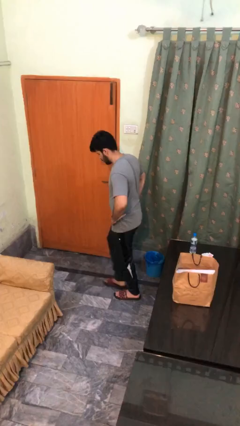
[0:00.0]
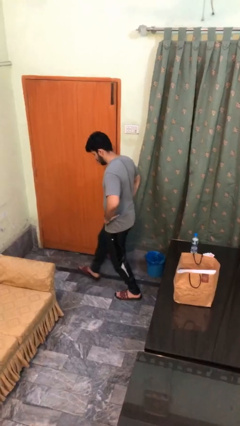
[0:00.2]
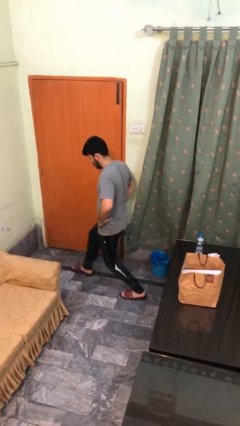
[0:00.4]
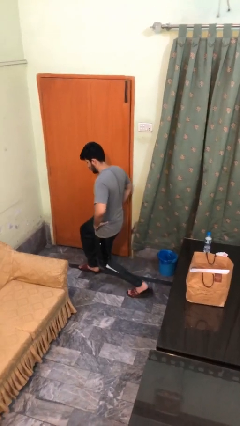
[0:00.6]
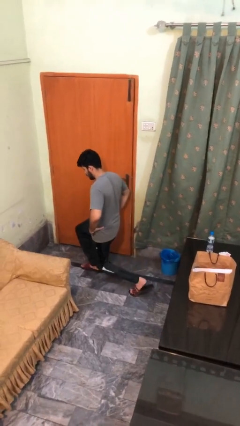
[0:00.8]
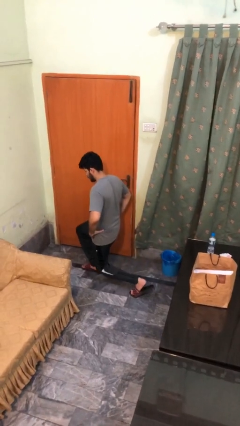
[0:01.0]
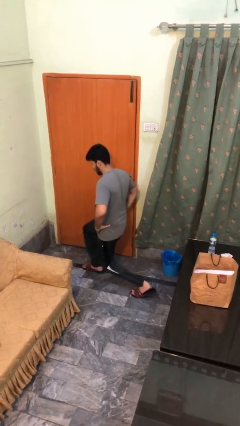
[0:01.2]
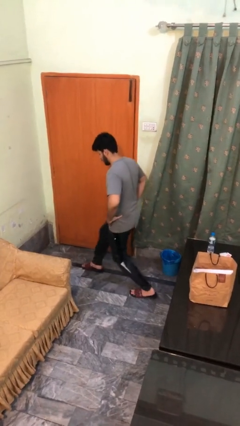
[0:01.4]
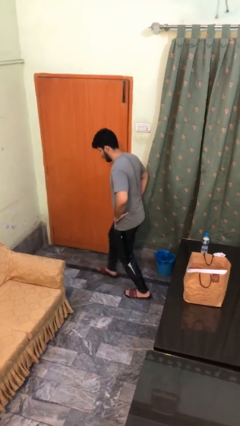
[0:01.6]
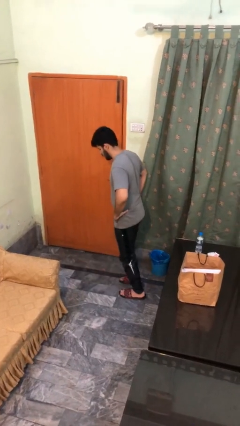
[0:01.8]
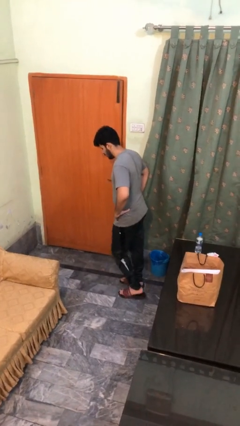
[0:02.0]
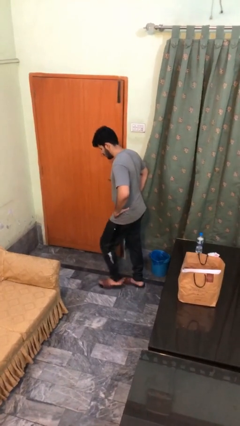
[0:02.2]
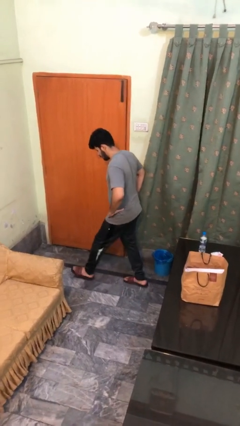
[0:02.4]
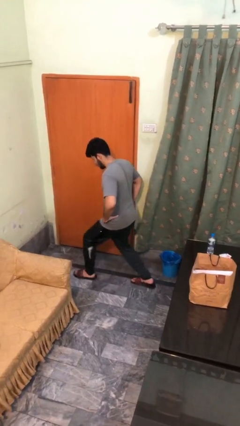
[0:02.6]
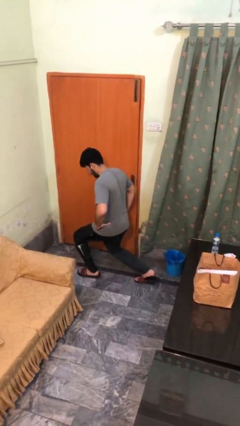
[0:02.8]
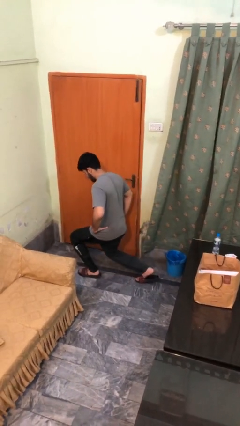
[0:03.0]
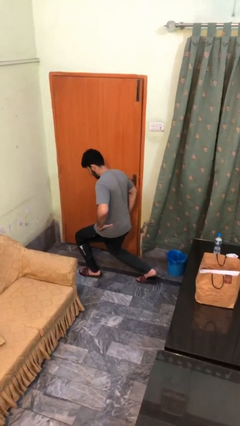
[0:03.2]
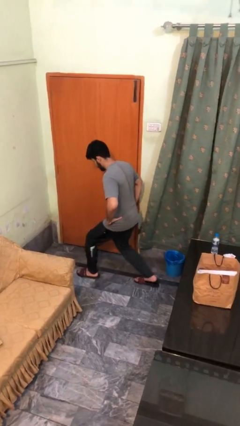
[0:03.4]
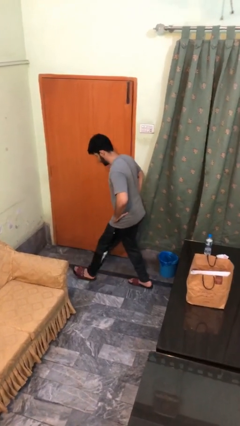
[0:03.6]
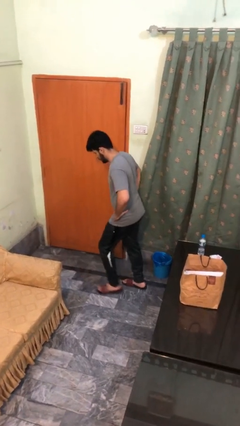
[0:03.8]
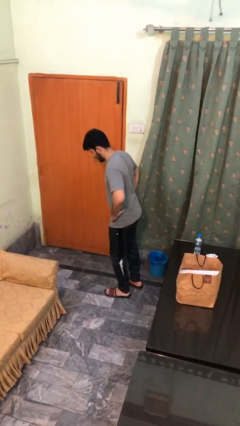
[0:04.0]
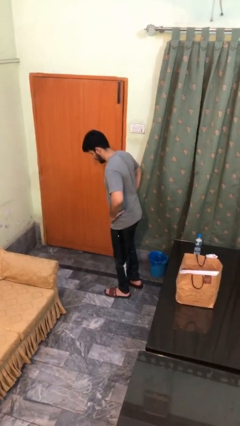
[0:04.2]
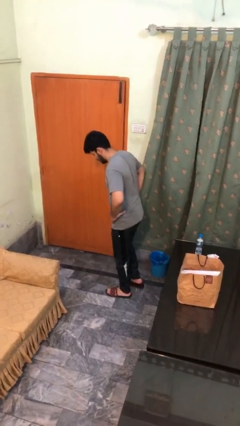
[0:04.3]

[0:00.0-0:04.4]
person exercises with lunges

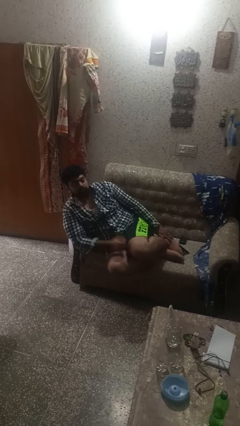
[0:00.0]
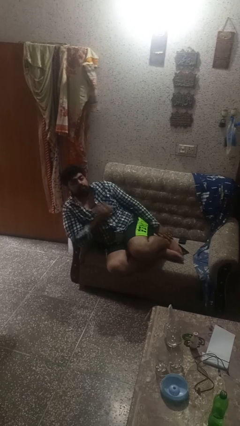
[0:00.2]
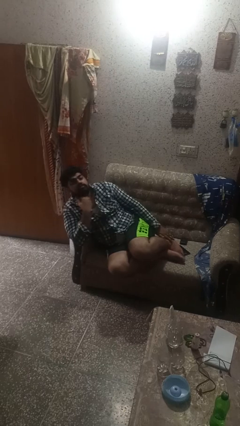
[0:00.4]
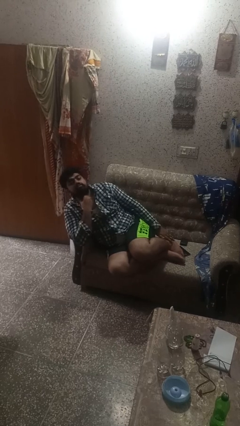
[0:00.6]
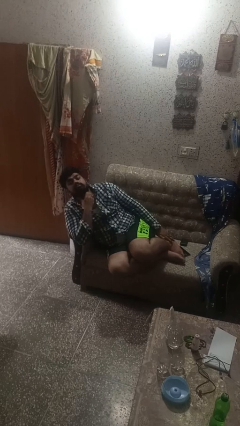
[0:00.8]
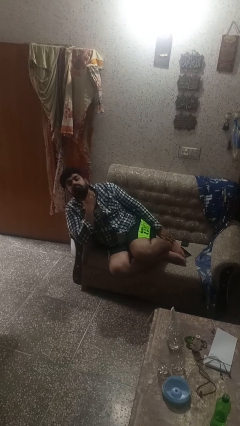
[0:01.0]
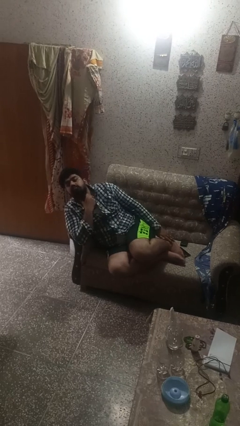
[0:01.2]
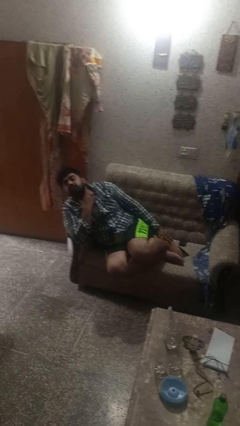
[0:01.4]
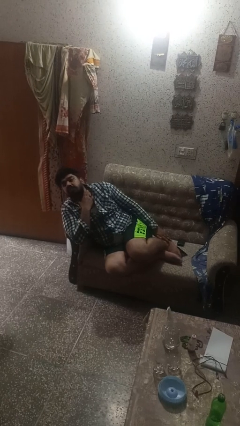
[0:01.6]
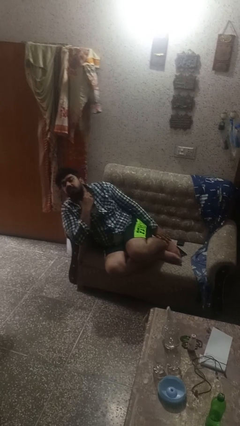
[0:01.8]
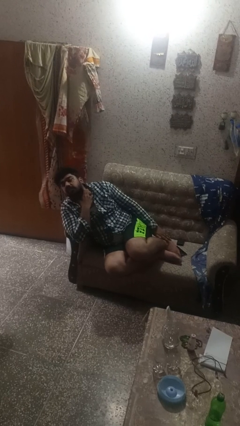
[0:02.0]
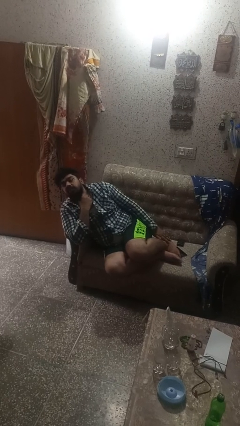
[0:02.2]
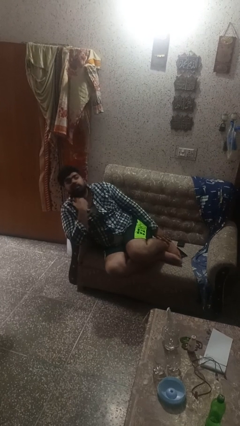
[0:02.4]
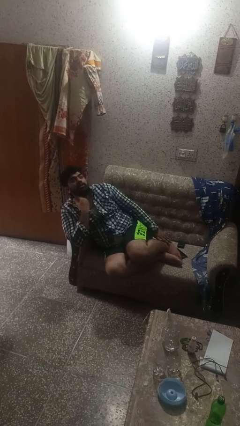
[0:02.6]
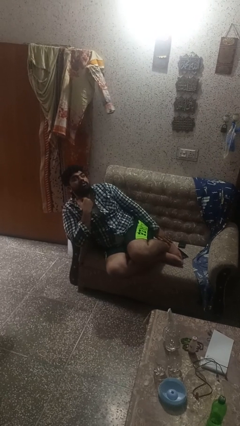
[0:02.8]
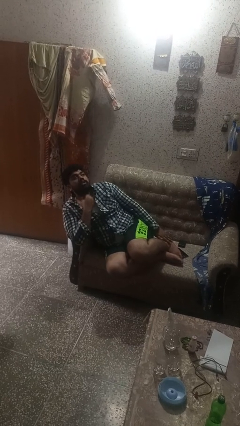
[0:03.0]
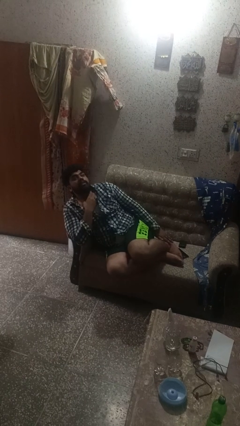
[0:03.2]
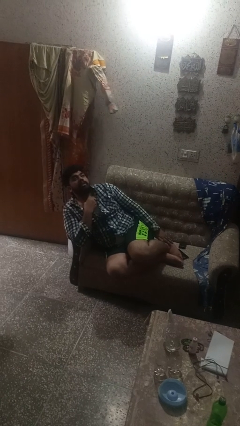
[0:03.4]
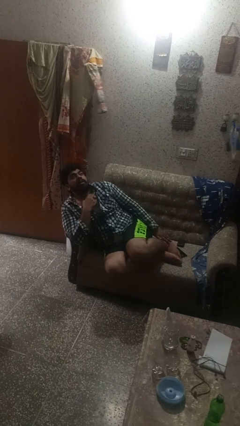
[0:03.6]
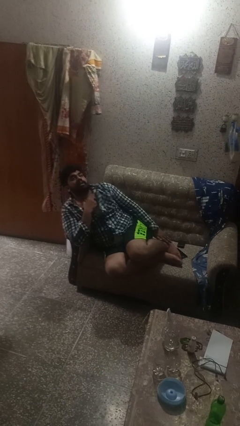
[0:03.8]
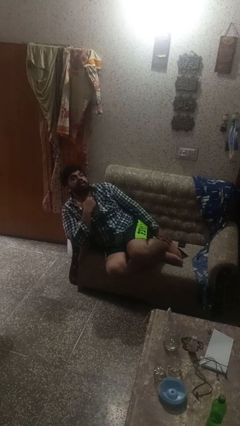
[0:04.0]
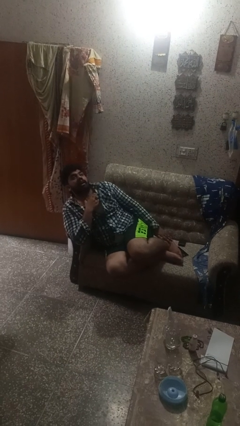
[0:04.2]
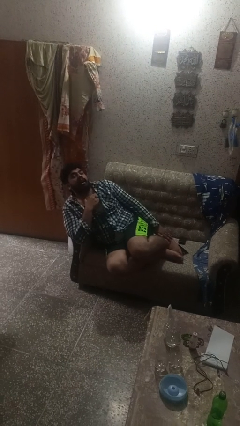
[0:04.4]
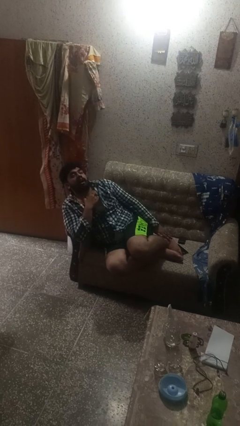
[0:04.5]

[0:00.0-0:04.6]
person rubs neck

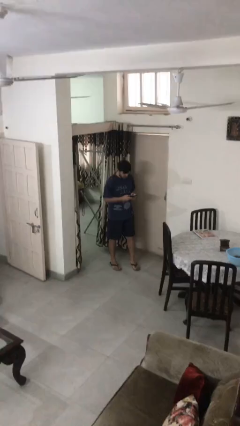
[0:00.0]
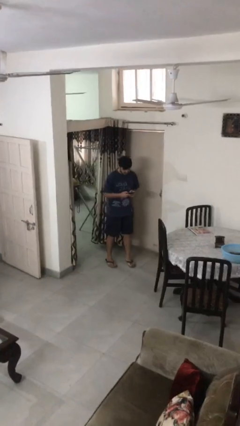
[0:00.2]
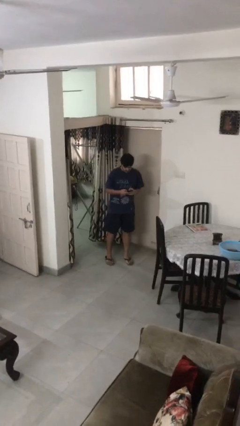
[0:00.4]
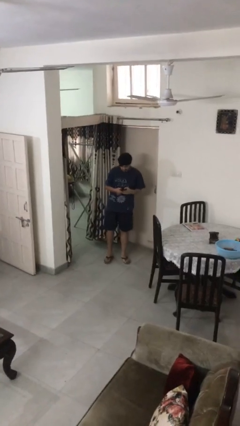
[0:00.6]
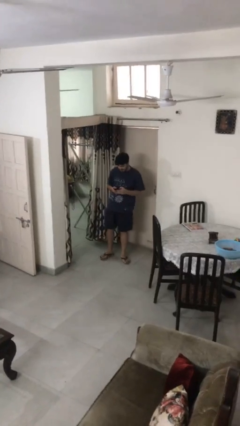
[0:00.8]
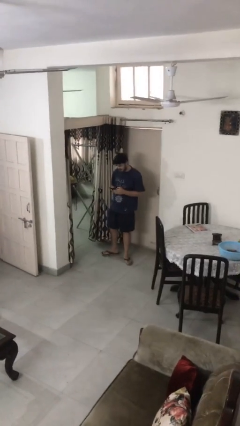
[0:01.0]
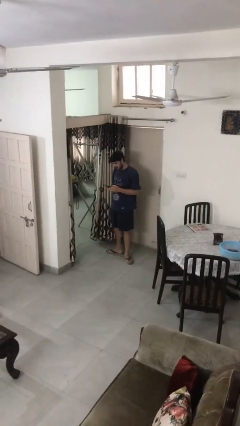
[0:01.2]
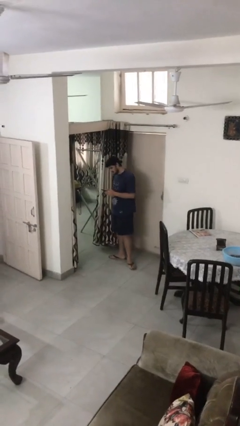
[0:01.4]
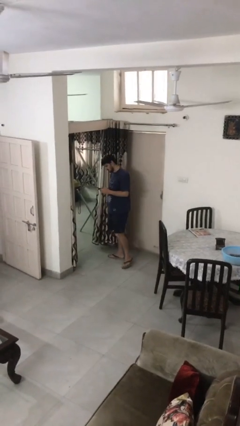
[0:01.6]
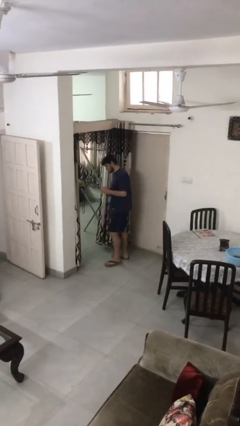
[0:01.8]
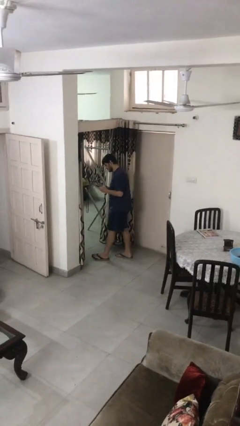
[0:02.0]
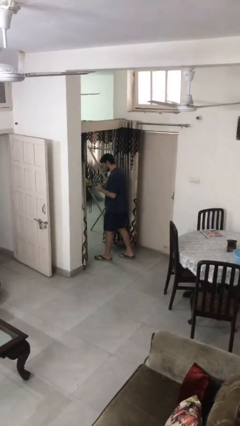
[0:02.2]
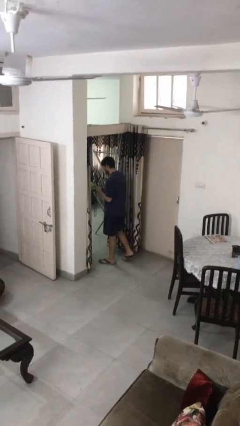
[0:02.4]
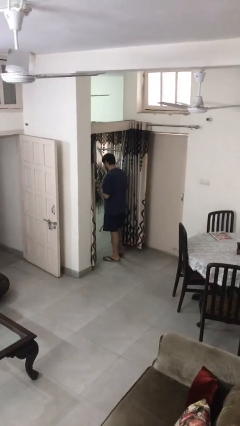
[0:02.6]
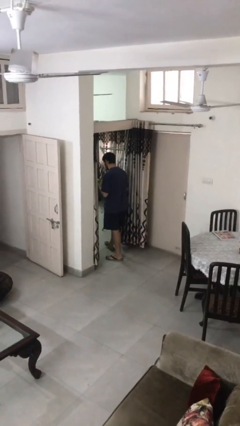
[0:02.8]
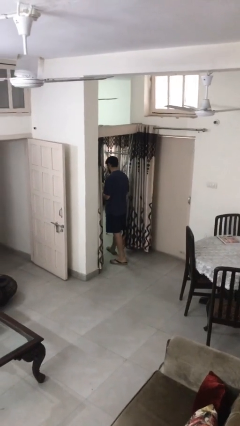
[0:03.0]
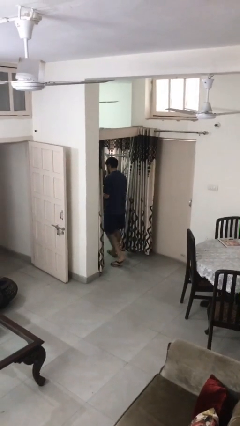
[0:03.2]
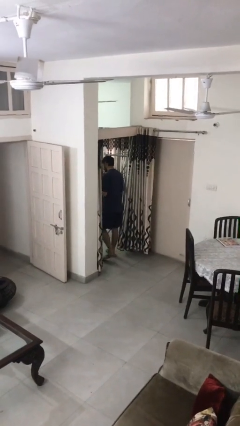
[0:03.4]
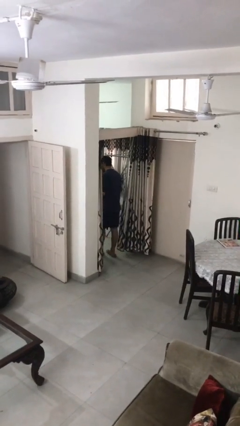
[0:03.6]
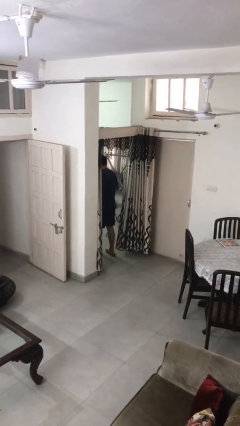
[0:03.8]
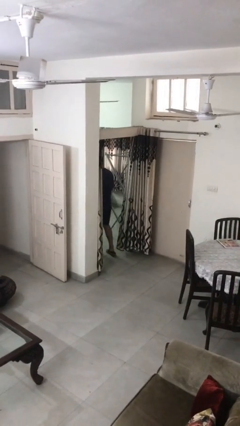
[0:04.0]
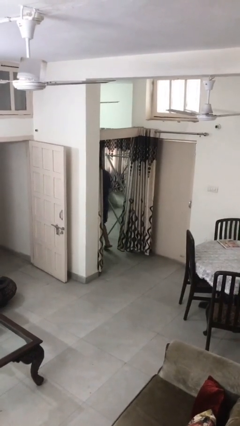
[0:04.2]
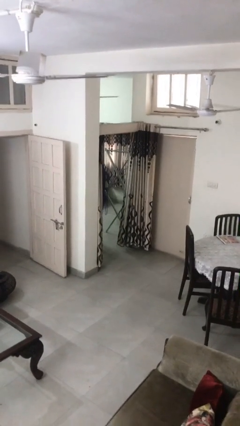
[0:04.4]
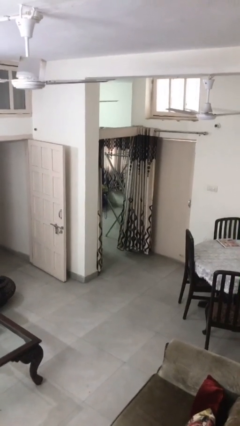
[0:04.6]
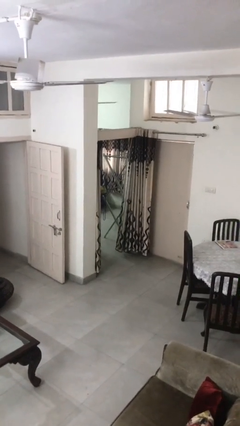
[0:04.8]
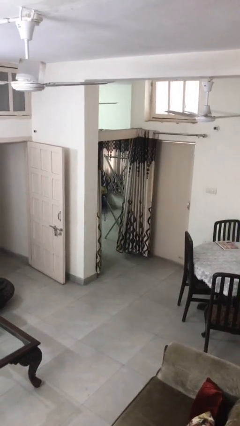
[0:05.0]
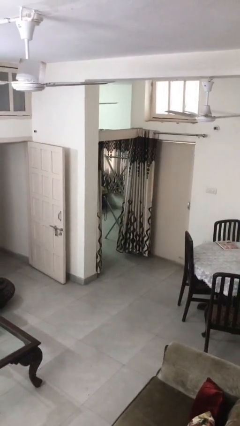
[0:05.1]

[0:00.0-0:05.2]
person exits scene through structure

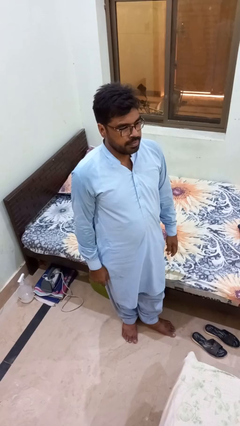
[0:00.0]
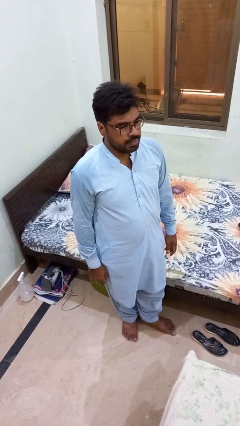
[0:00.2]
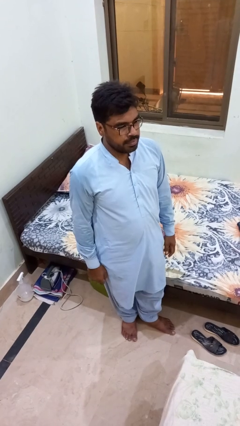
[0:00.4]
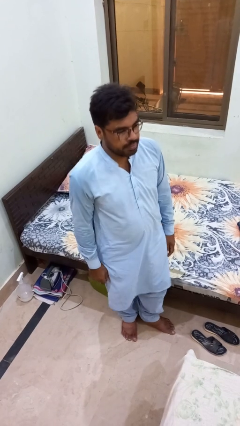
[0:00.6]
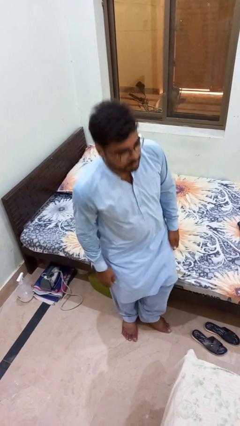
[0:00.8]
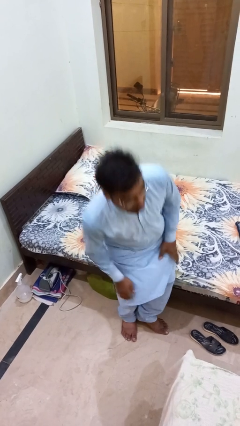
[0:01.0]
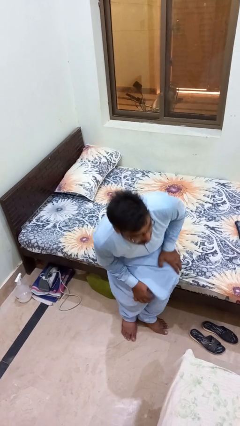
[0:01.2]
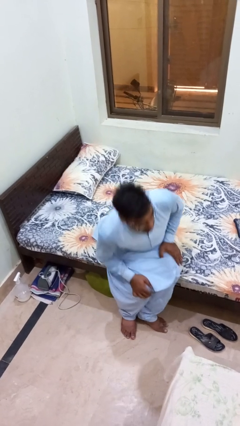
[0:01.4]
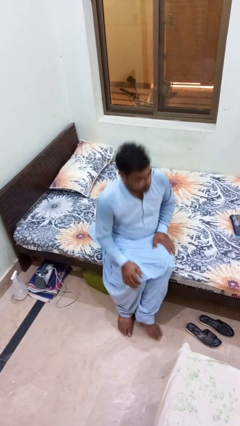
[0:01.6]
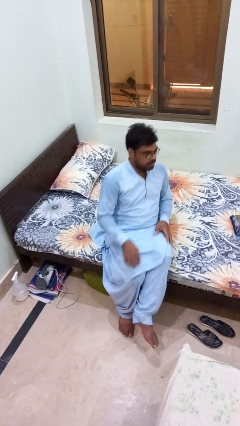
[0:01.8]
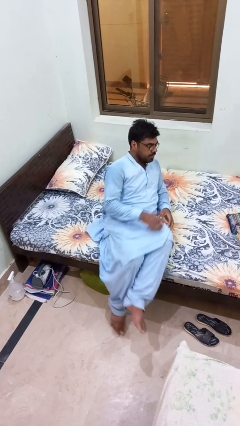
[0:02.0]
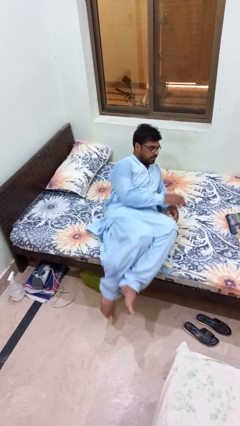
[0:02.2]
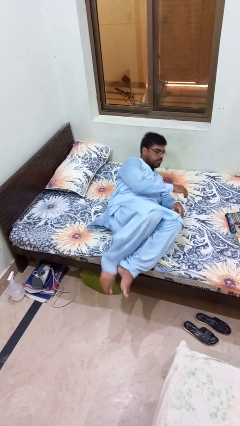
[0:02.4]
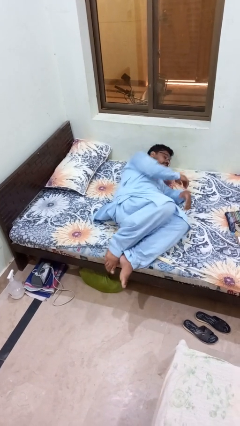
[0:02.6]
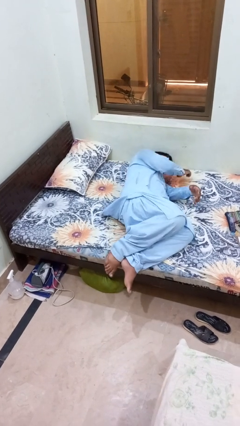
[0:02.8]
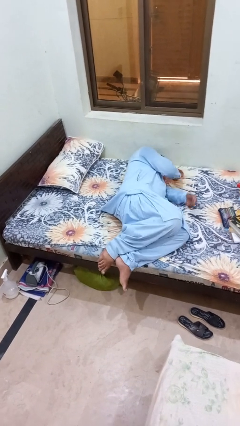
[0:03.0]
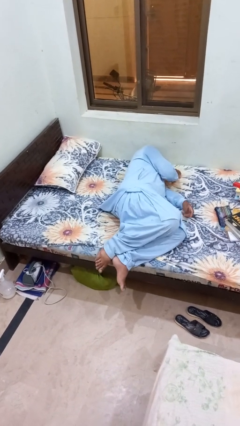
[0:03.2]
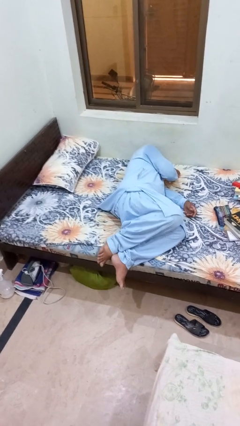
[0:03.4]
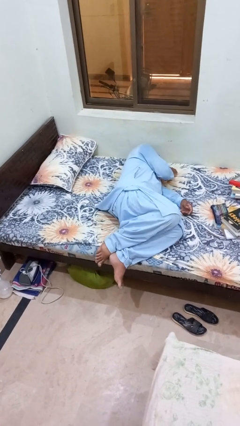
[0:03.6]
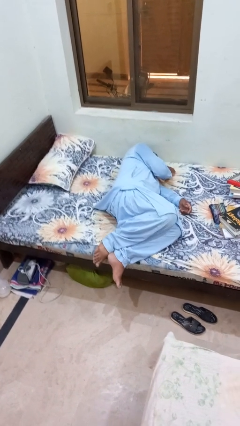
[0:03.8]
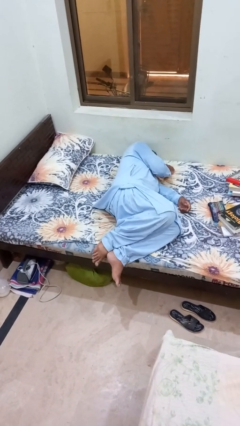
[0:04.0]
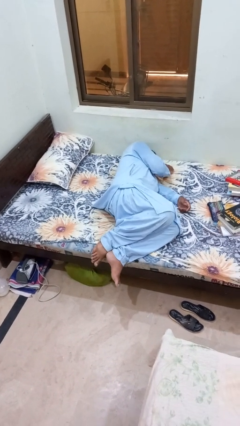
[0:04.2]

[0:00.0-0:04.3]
person lies down on bed
